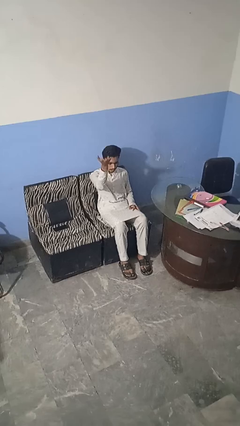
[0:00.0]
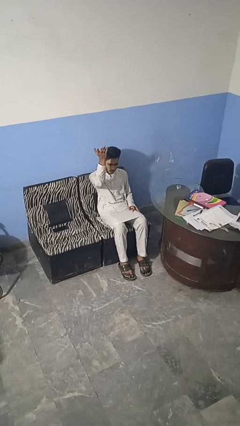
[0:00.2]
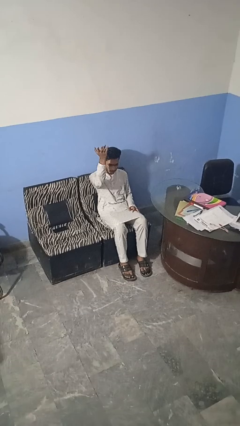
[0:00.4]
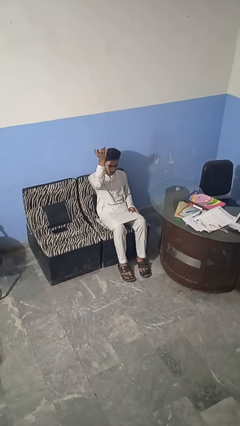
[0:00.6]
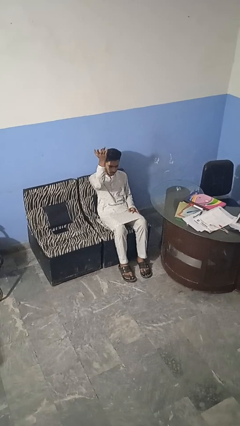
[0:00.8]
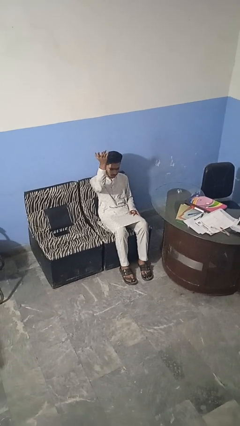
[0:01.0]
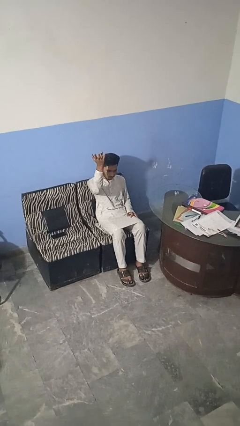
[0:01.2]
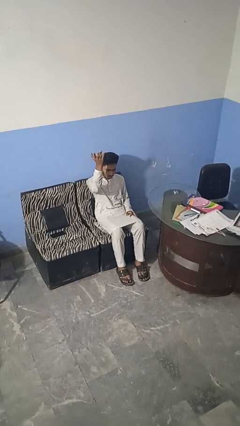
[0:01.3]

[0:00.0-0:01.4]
person gestures swipe up

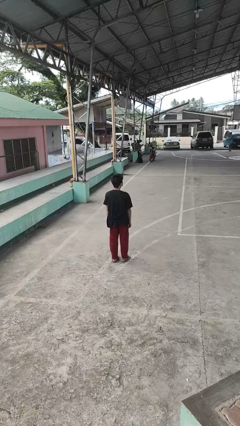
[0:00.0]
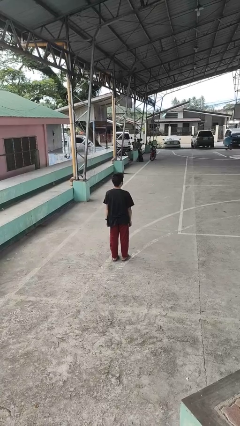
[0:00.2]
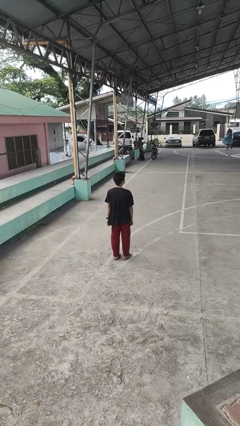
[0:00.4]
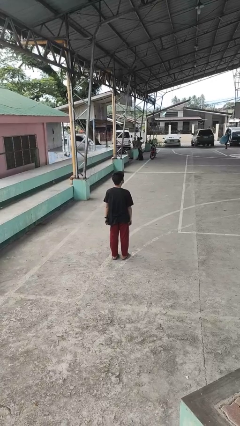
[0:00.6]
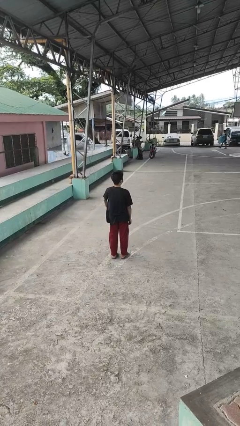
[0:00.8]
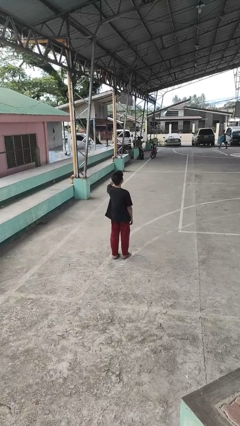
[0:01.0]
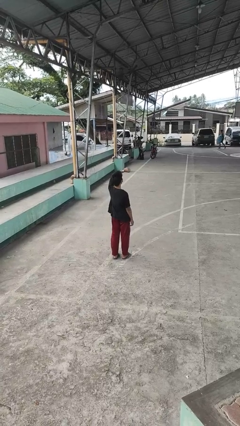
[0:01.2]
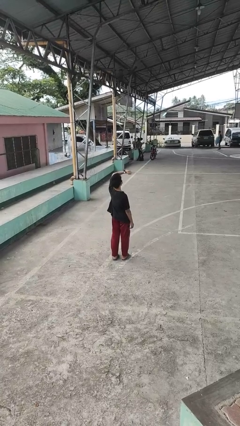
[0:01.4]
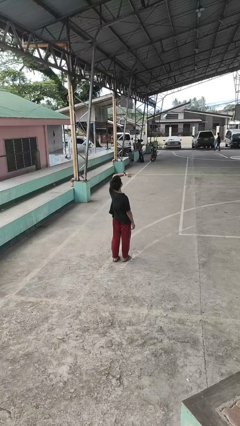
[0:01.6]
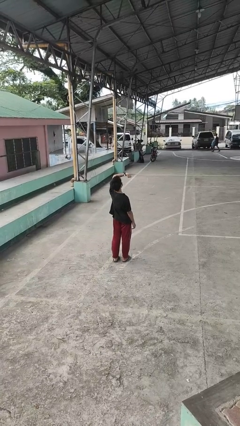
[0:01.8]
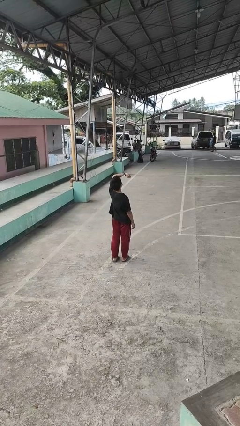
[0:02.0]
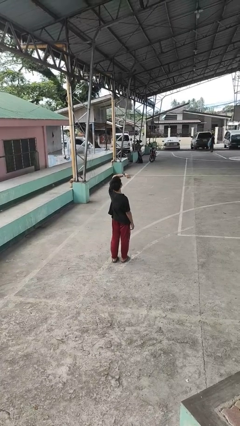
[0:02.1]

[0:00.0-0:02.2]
person looks at wristwatch

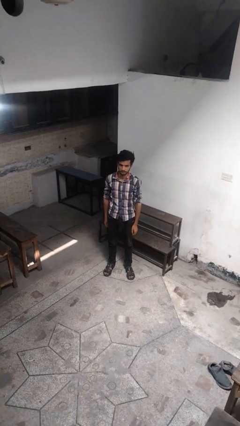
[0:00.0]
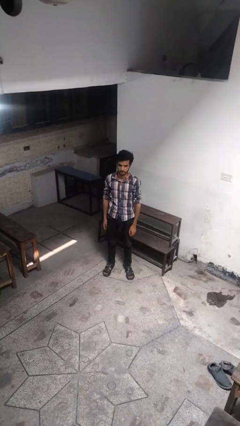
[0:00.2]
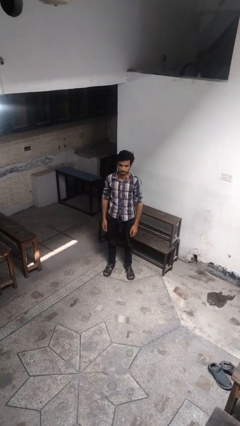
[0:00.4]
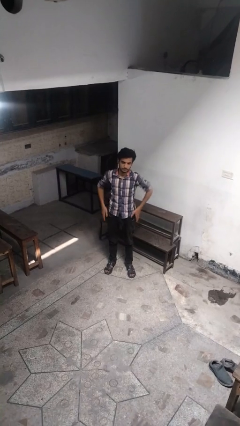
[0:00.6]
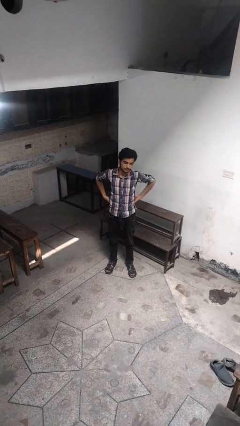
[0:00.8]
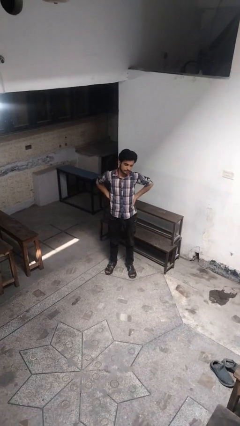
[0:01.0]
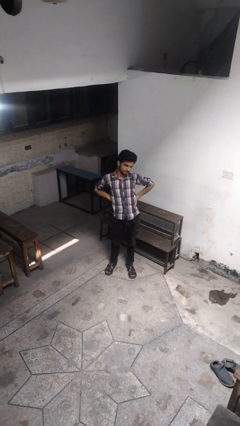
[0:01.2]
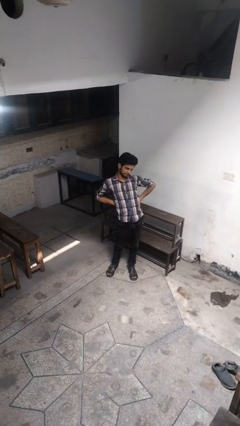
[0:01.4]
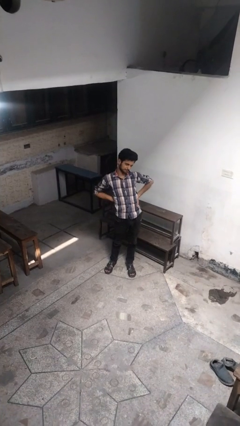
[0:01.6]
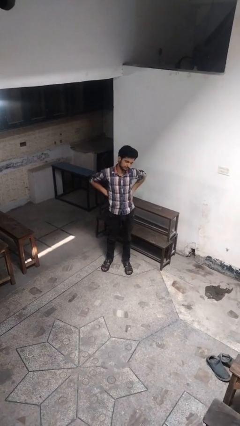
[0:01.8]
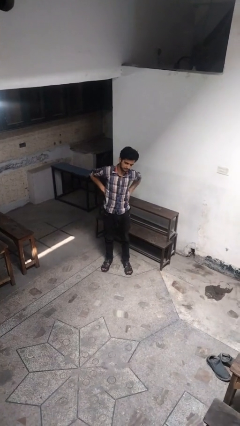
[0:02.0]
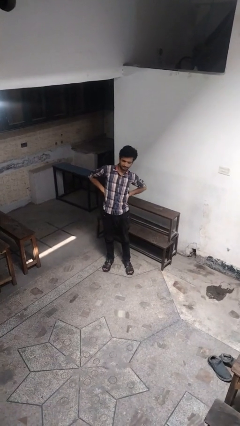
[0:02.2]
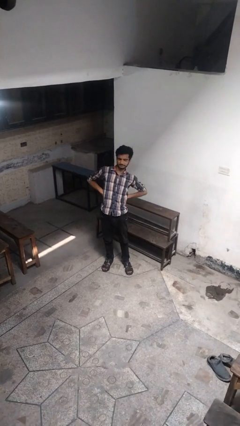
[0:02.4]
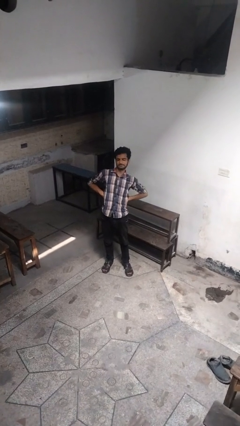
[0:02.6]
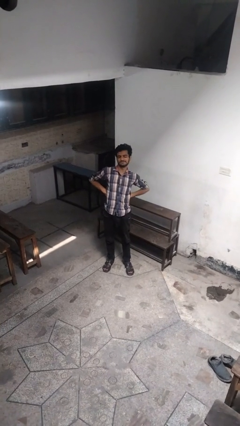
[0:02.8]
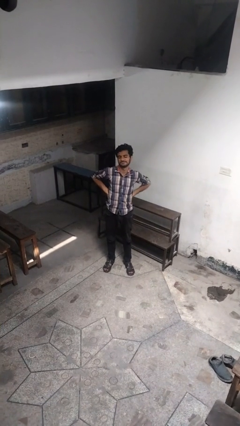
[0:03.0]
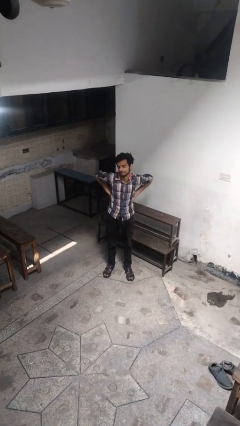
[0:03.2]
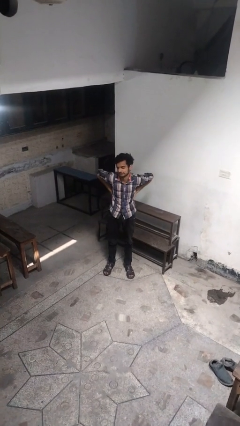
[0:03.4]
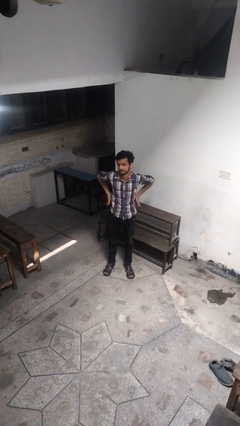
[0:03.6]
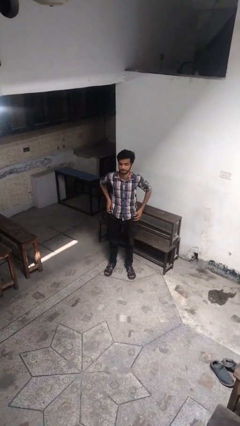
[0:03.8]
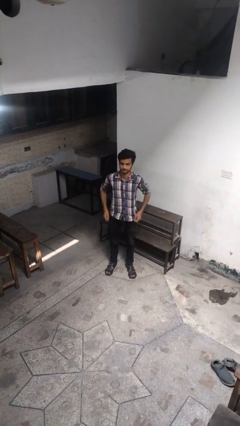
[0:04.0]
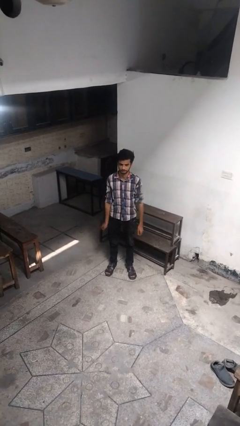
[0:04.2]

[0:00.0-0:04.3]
person stretches back

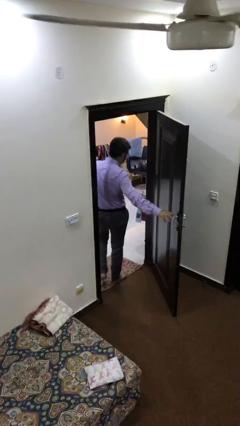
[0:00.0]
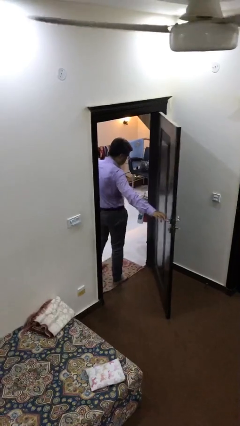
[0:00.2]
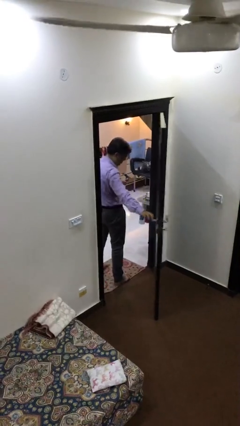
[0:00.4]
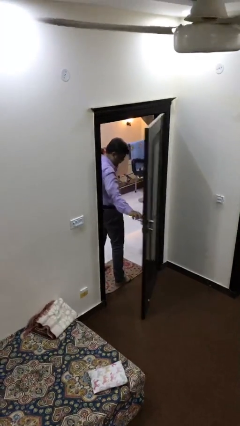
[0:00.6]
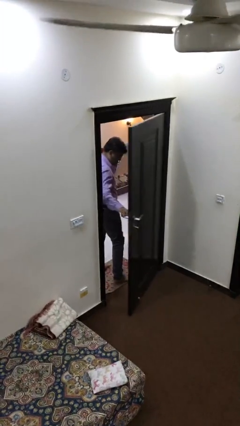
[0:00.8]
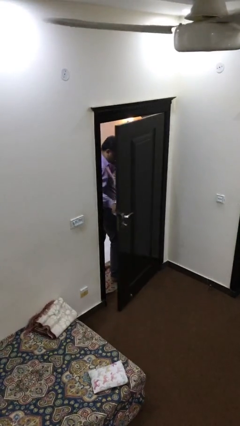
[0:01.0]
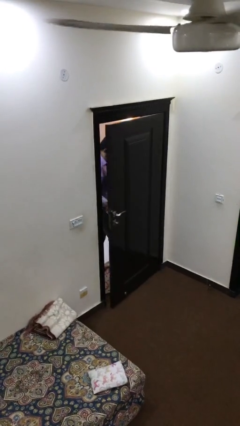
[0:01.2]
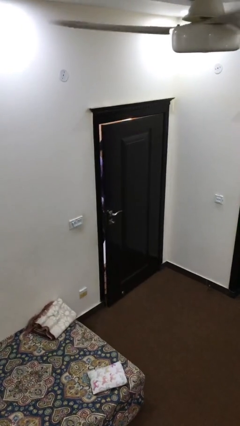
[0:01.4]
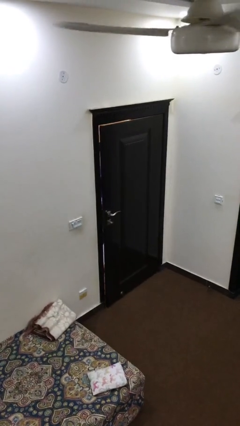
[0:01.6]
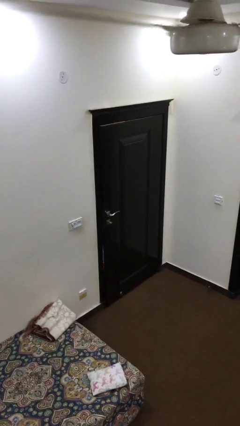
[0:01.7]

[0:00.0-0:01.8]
person closes facility door

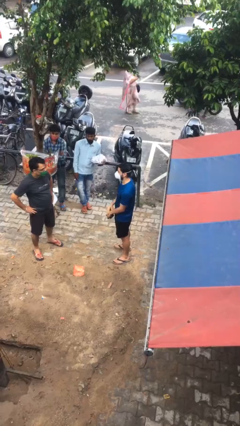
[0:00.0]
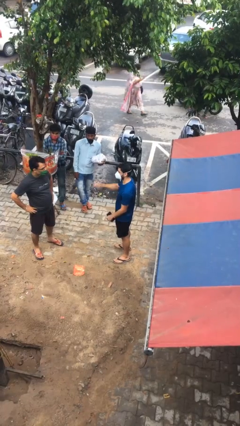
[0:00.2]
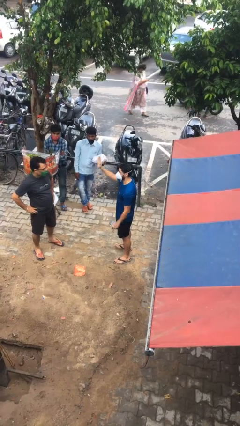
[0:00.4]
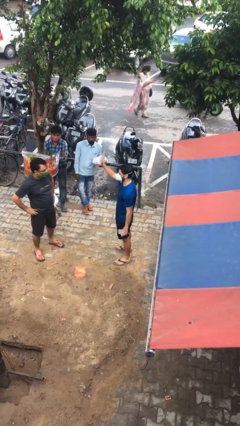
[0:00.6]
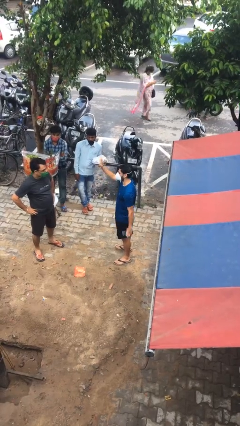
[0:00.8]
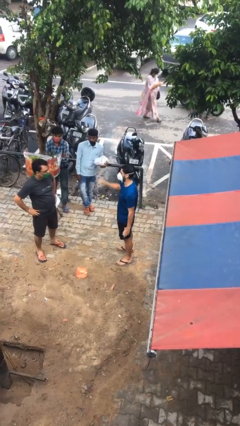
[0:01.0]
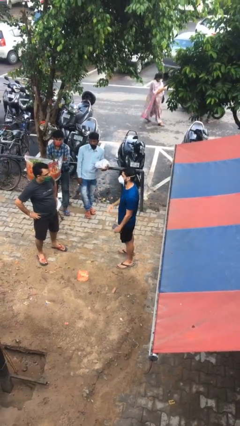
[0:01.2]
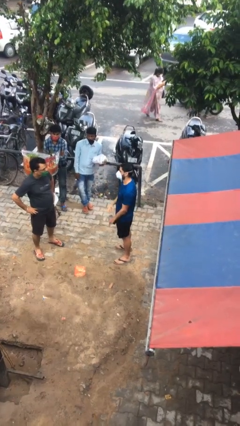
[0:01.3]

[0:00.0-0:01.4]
person waves at person

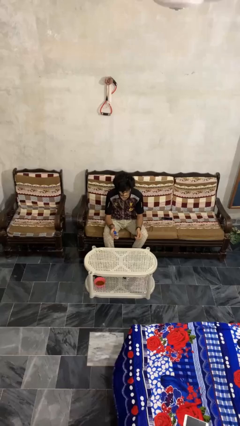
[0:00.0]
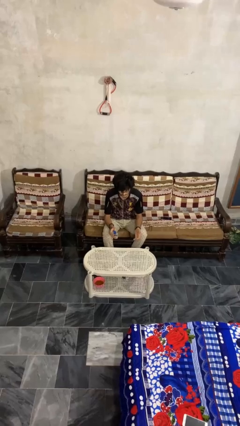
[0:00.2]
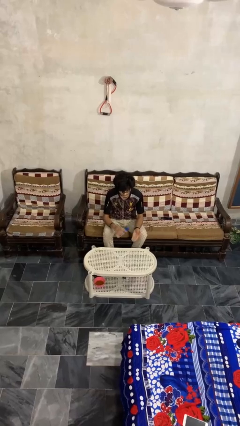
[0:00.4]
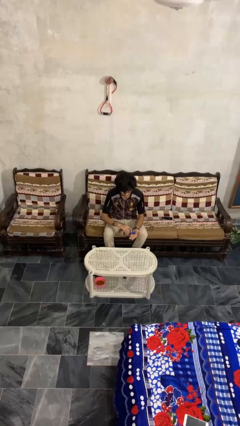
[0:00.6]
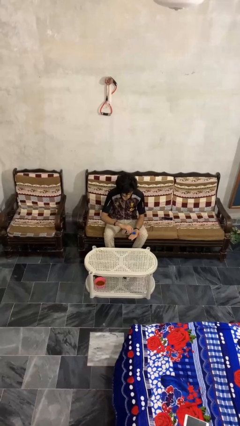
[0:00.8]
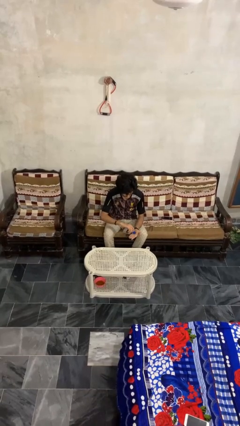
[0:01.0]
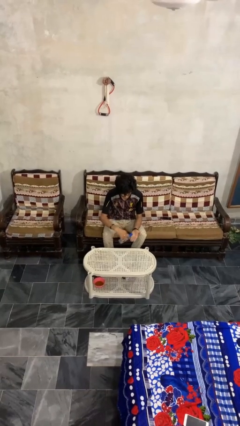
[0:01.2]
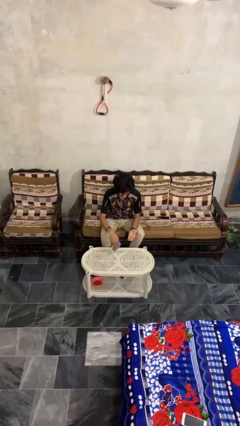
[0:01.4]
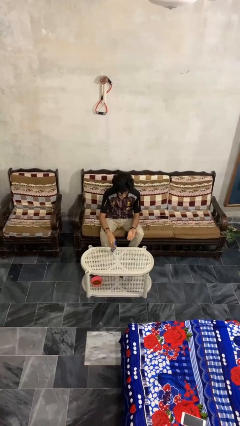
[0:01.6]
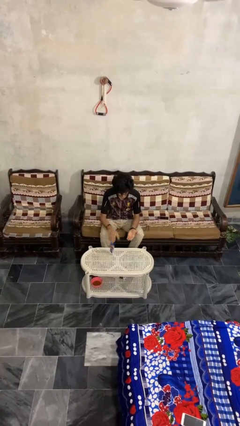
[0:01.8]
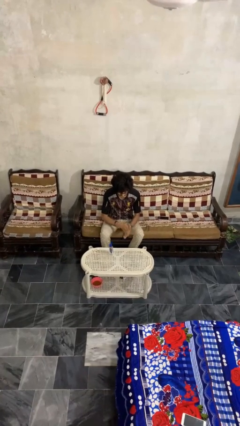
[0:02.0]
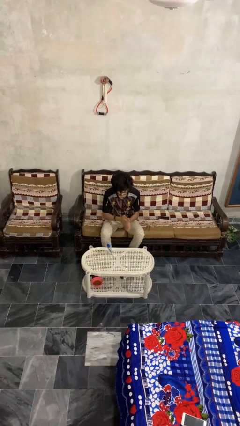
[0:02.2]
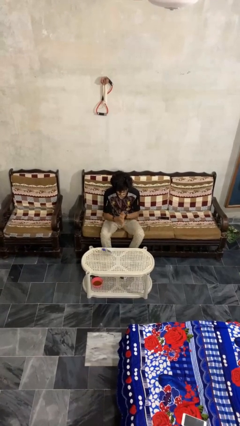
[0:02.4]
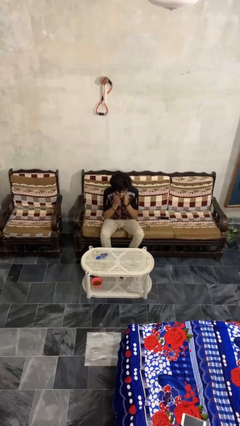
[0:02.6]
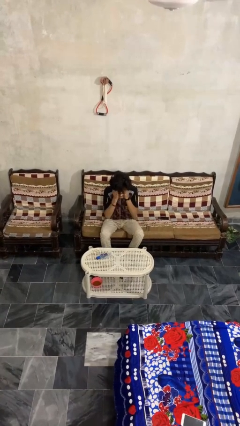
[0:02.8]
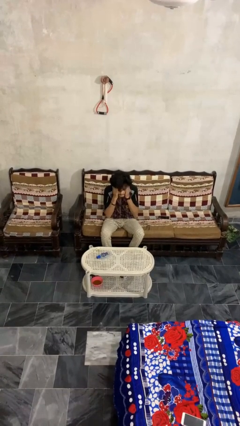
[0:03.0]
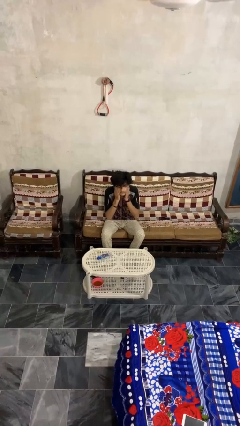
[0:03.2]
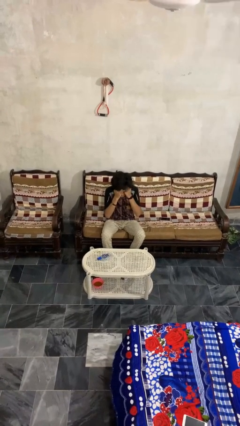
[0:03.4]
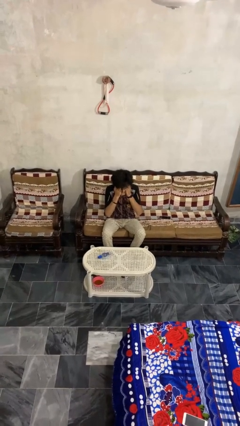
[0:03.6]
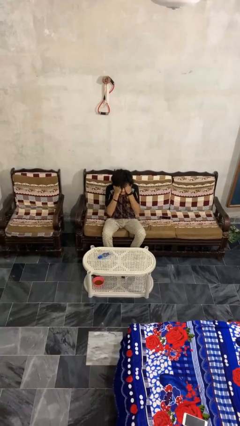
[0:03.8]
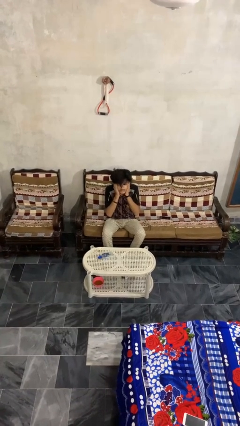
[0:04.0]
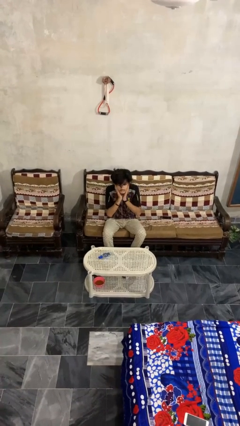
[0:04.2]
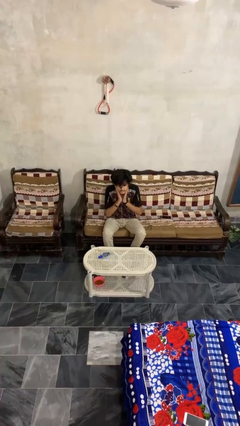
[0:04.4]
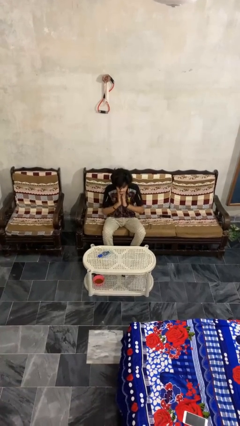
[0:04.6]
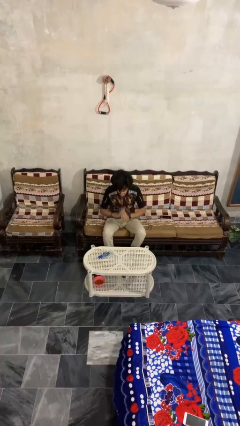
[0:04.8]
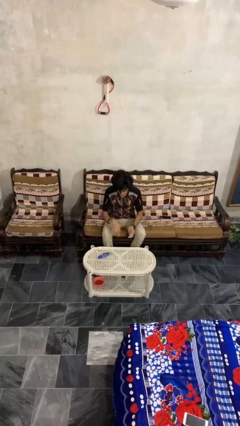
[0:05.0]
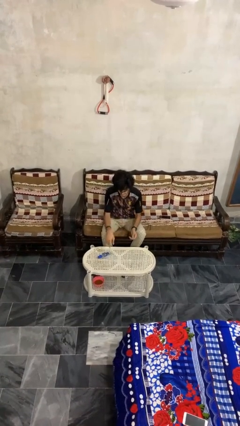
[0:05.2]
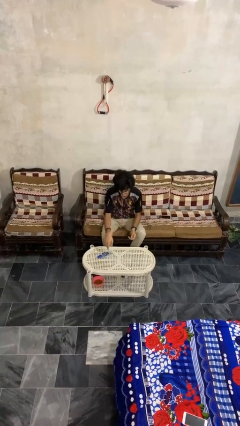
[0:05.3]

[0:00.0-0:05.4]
person applies facial moisturizer

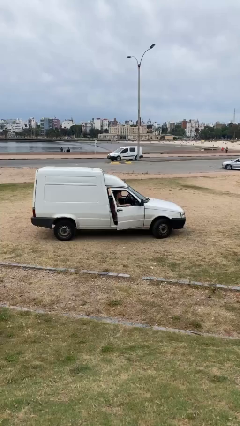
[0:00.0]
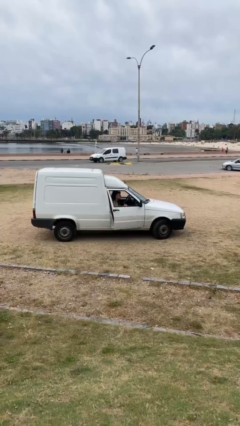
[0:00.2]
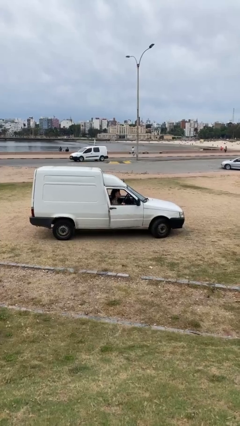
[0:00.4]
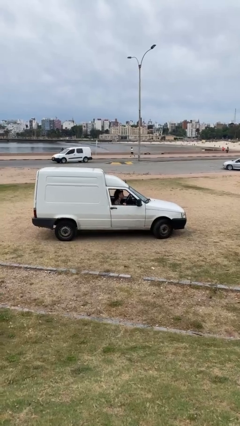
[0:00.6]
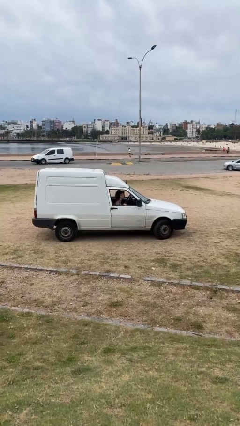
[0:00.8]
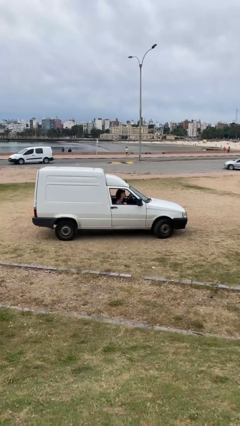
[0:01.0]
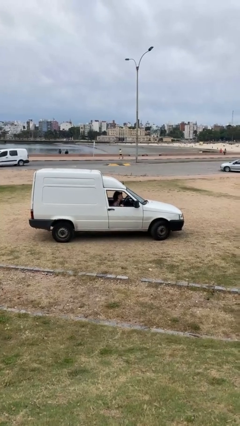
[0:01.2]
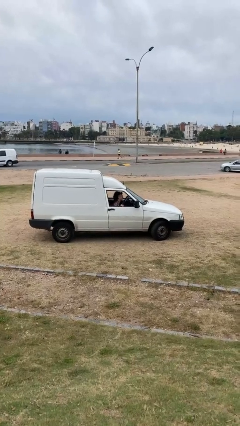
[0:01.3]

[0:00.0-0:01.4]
person closes car door
